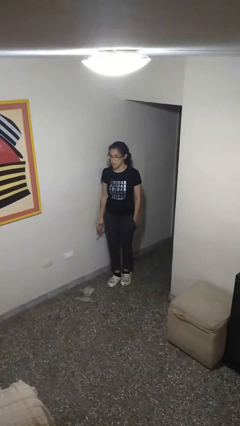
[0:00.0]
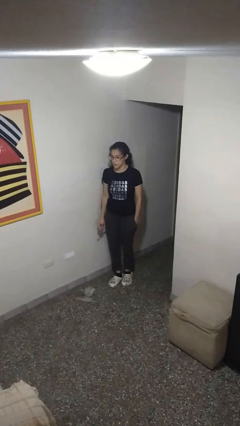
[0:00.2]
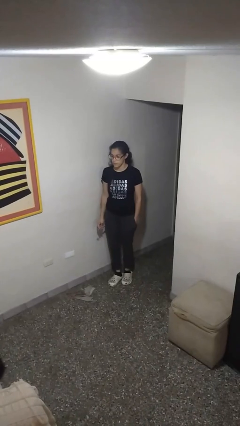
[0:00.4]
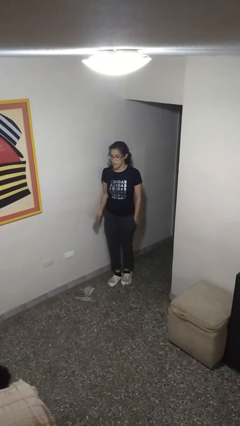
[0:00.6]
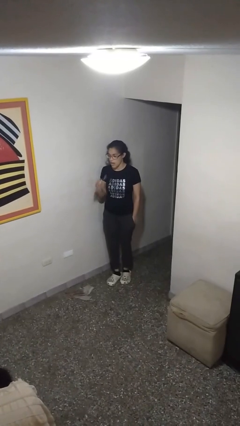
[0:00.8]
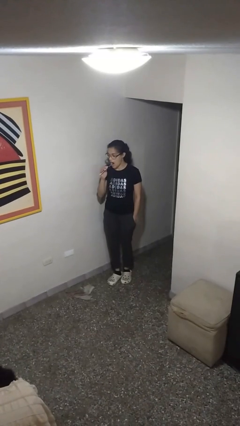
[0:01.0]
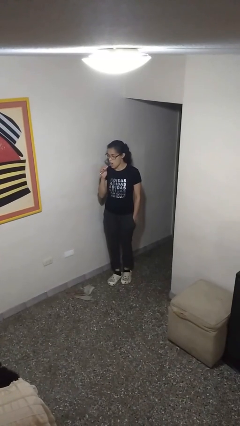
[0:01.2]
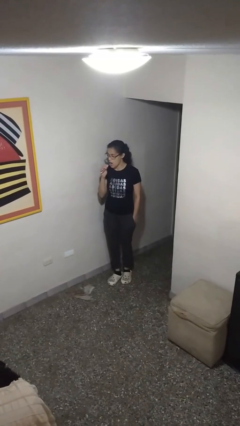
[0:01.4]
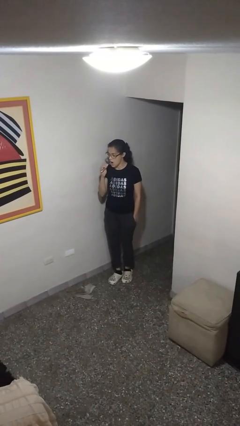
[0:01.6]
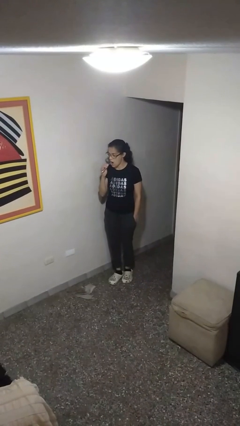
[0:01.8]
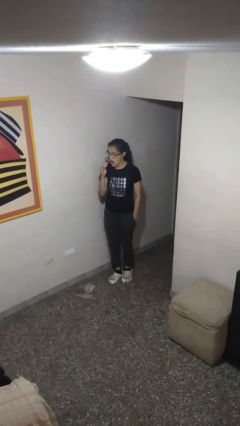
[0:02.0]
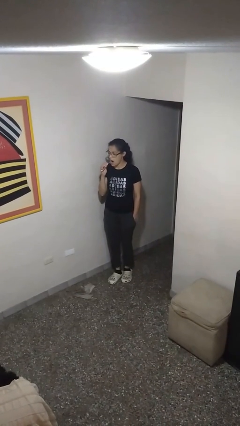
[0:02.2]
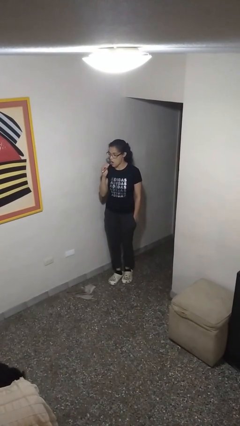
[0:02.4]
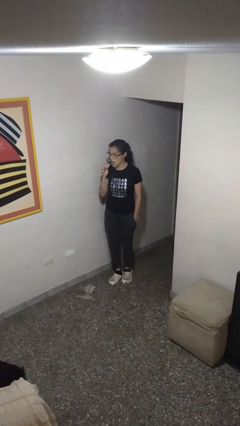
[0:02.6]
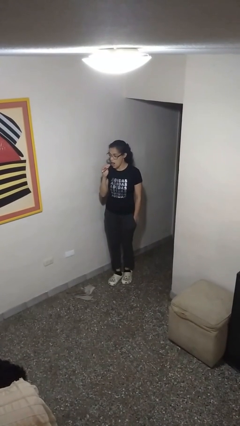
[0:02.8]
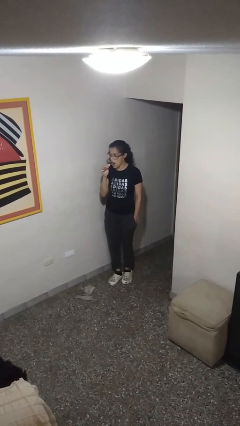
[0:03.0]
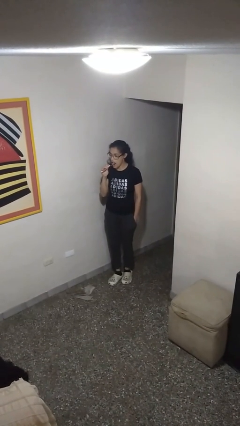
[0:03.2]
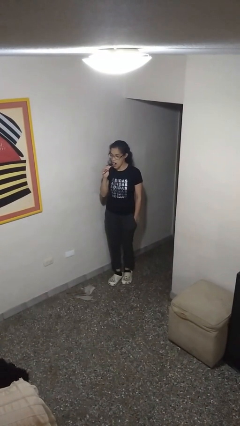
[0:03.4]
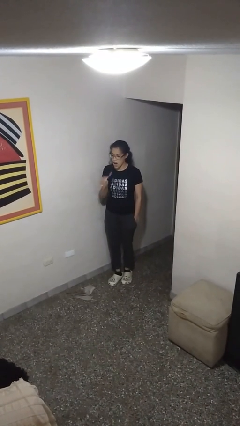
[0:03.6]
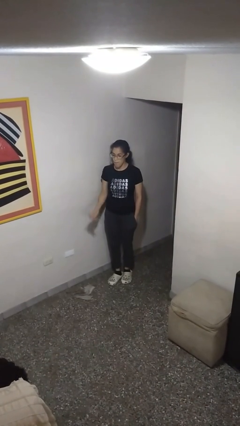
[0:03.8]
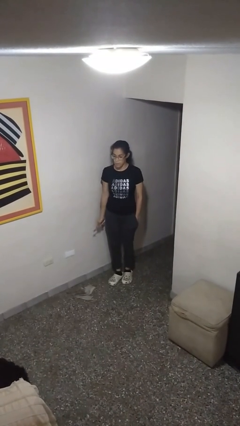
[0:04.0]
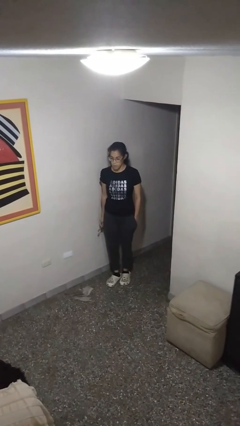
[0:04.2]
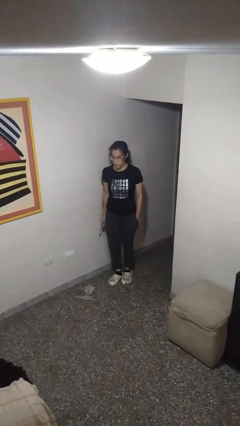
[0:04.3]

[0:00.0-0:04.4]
person brushes teeth

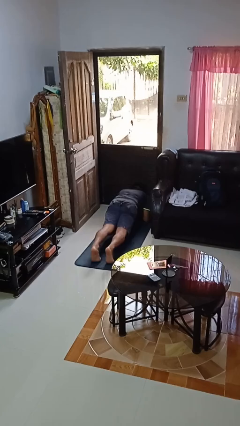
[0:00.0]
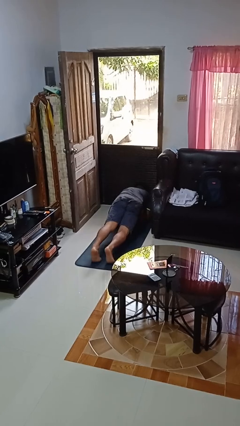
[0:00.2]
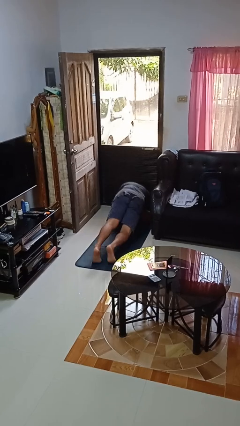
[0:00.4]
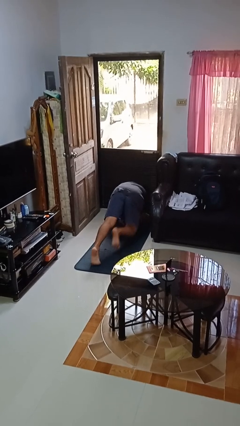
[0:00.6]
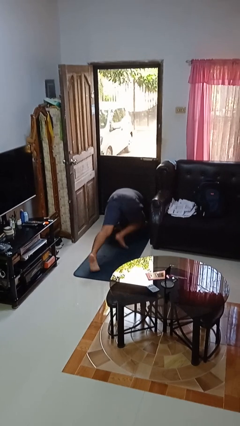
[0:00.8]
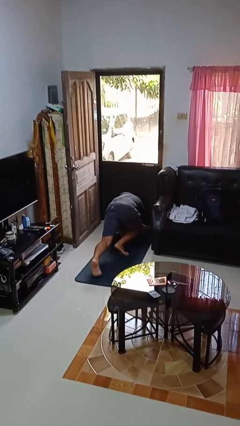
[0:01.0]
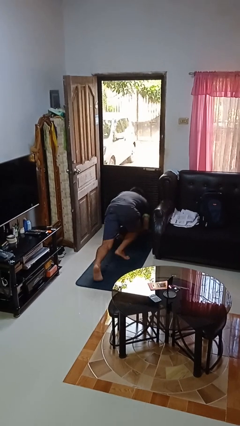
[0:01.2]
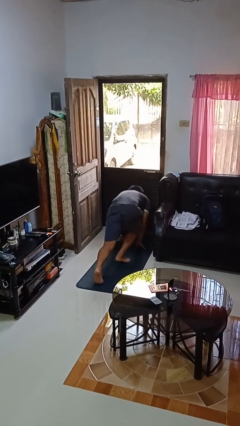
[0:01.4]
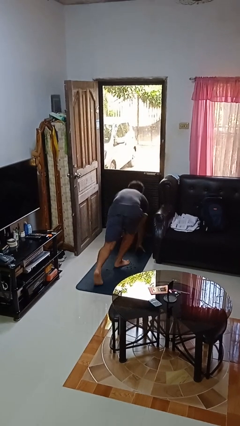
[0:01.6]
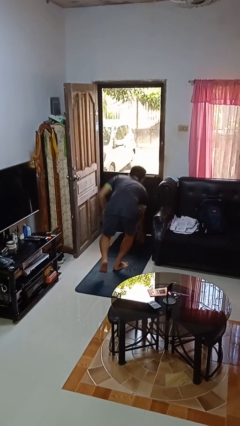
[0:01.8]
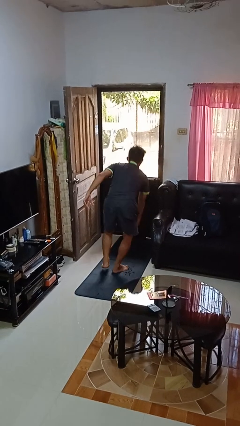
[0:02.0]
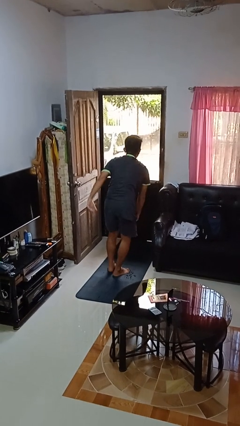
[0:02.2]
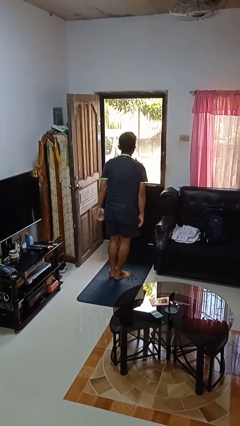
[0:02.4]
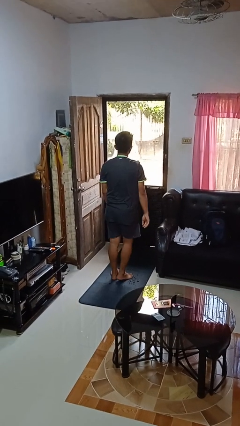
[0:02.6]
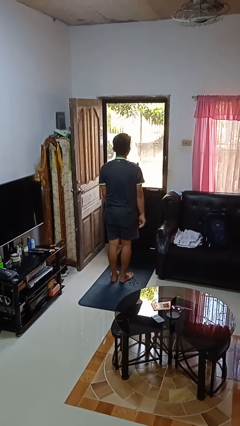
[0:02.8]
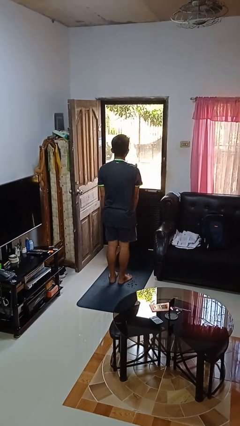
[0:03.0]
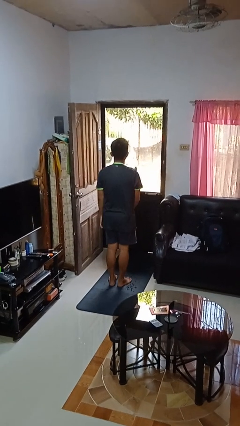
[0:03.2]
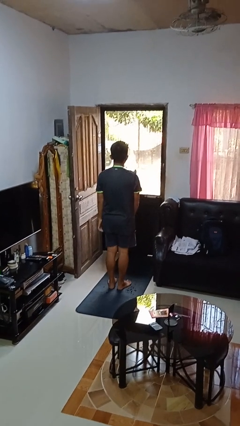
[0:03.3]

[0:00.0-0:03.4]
person stands up from floor

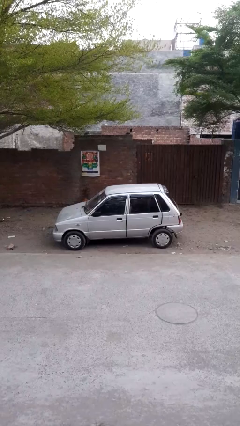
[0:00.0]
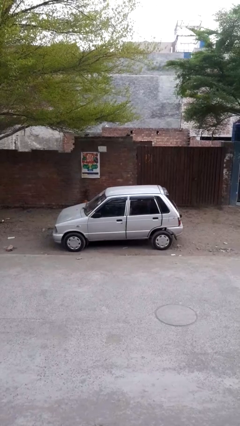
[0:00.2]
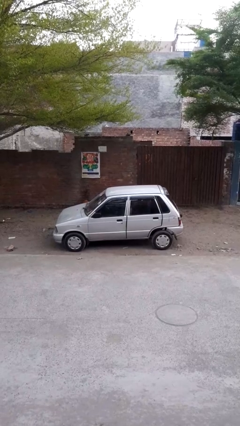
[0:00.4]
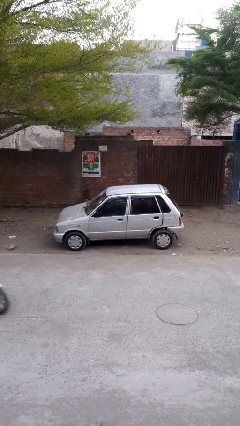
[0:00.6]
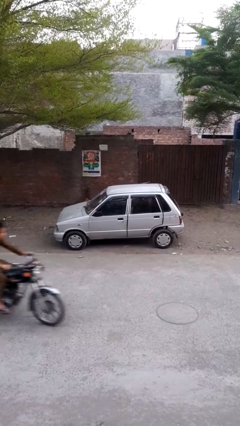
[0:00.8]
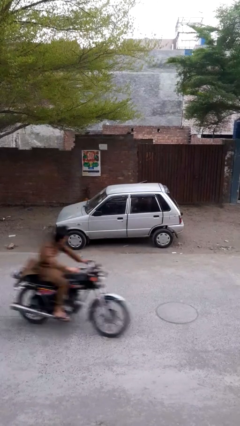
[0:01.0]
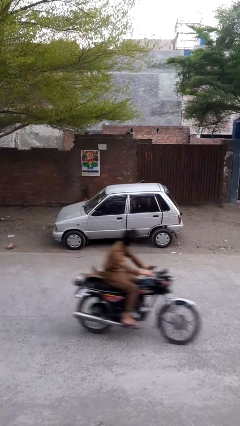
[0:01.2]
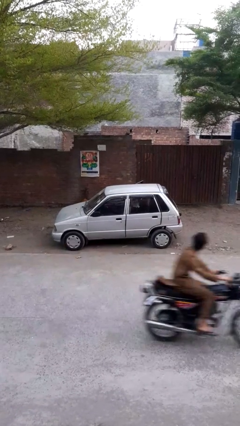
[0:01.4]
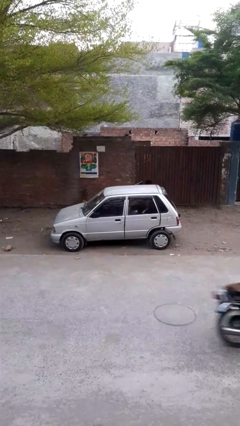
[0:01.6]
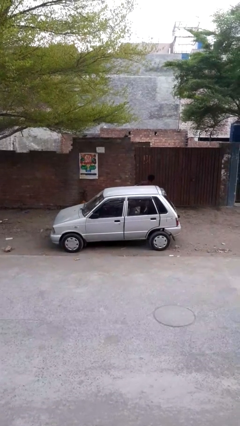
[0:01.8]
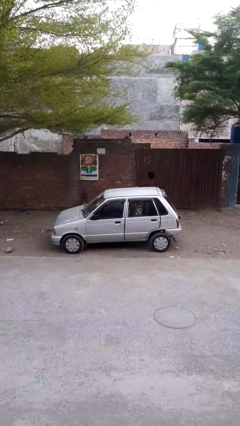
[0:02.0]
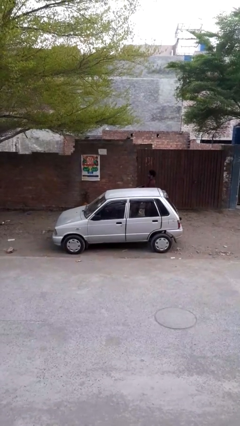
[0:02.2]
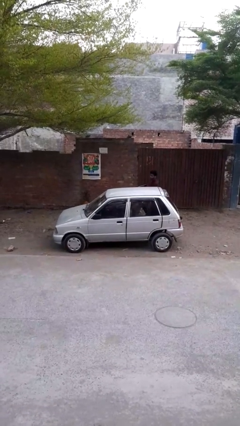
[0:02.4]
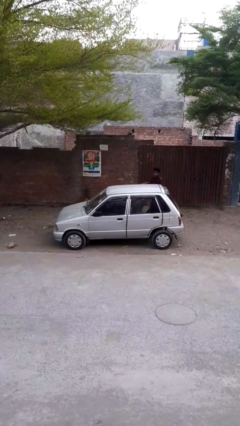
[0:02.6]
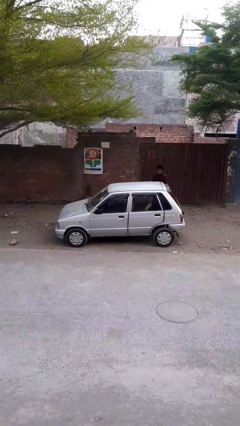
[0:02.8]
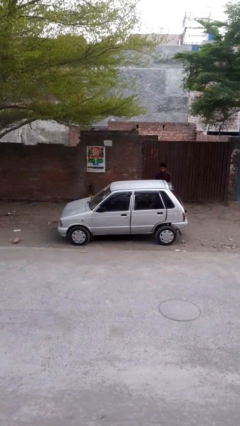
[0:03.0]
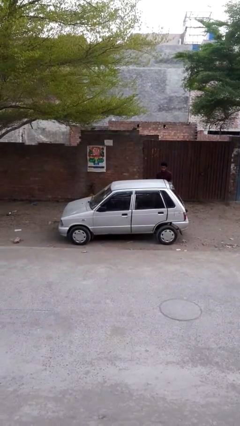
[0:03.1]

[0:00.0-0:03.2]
car drops off person

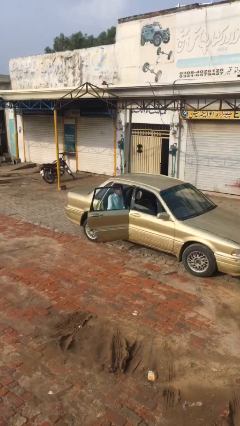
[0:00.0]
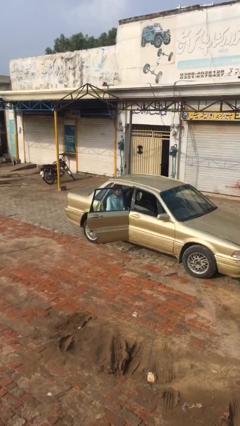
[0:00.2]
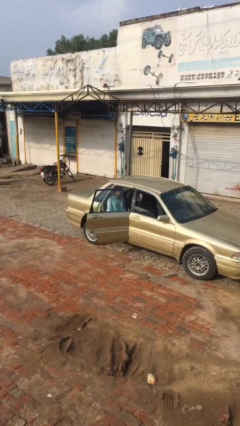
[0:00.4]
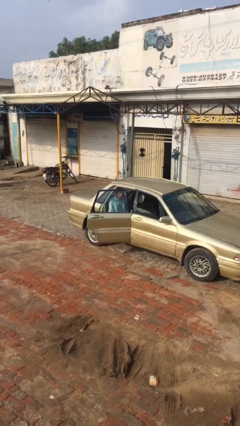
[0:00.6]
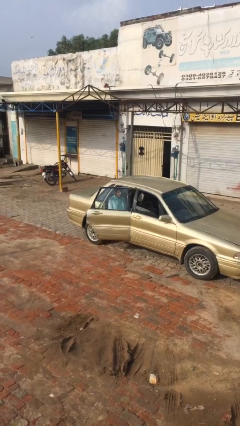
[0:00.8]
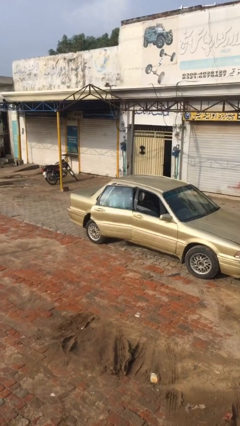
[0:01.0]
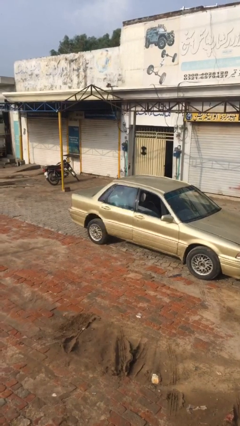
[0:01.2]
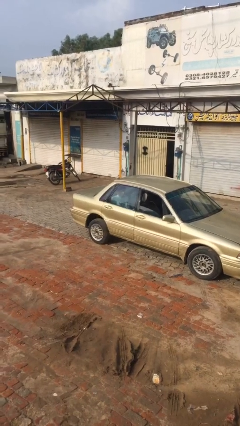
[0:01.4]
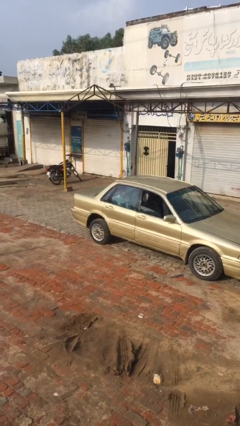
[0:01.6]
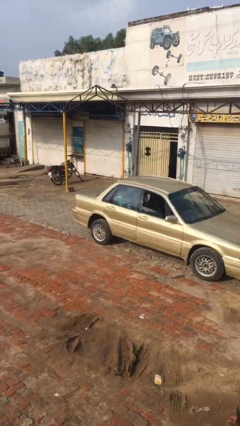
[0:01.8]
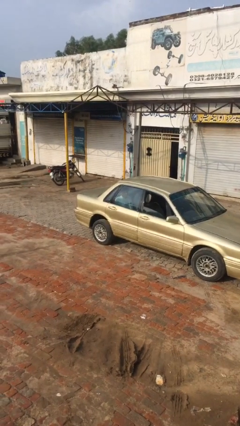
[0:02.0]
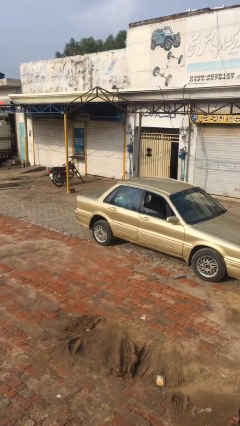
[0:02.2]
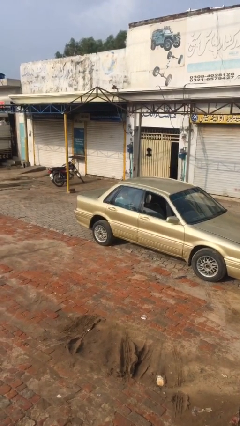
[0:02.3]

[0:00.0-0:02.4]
person closes car door

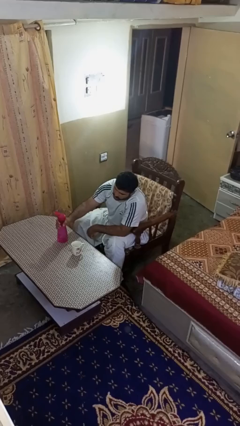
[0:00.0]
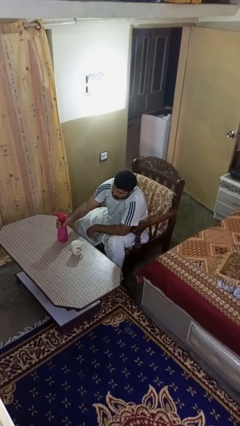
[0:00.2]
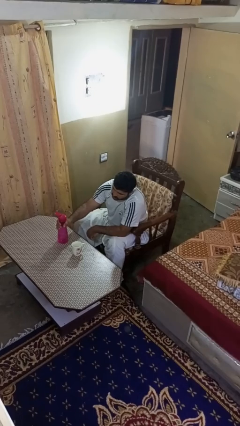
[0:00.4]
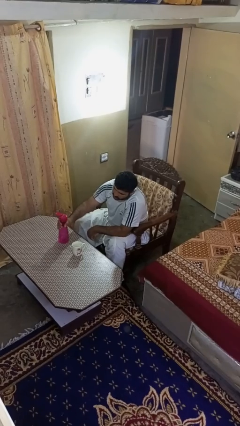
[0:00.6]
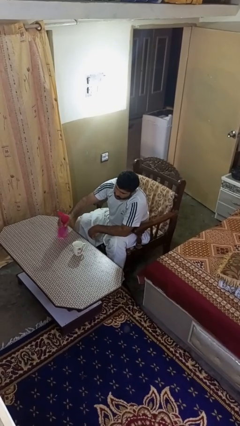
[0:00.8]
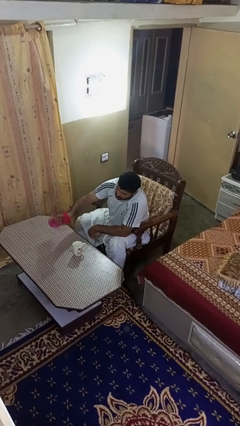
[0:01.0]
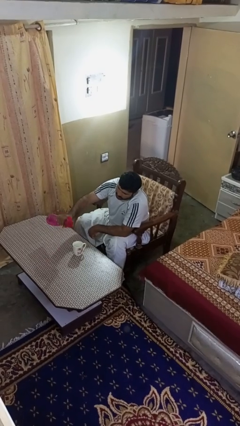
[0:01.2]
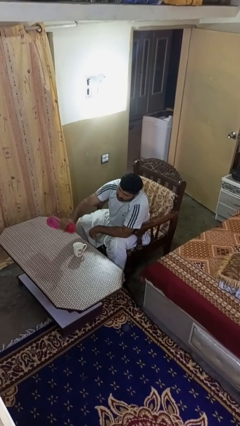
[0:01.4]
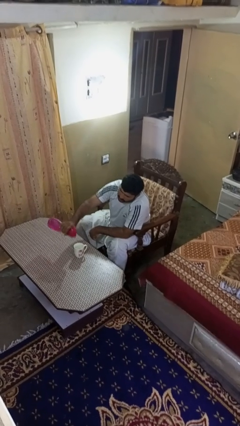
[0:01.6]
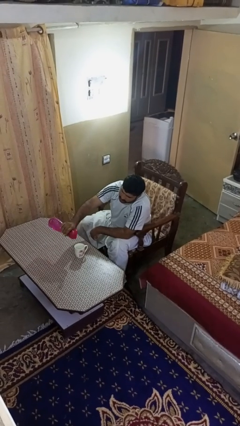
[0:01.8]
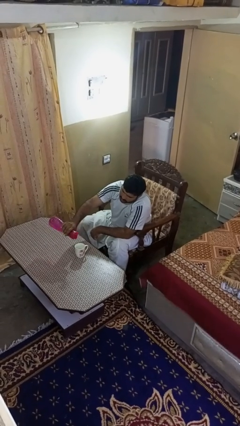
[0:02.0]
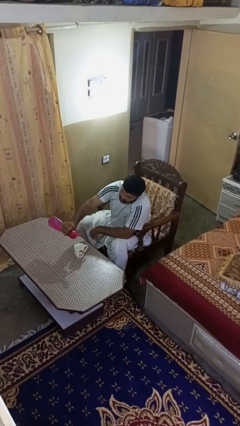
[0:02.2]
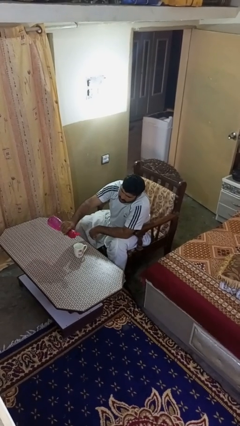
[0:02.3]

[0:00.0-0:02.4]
person pours liquid into cup

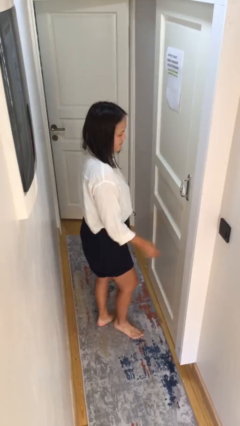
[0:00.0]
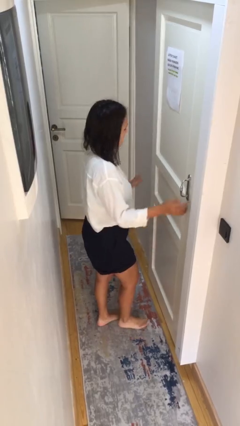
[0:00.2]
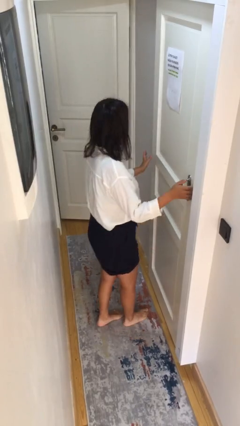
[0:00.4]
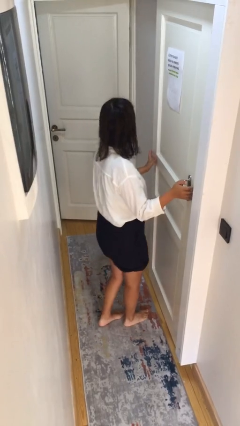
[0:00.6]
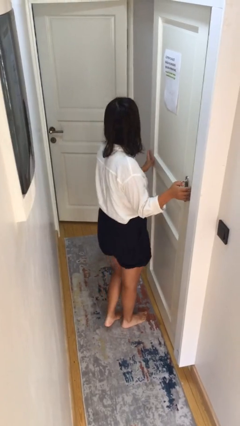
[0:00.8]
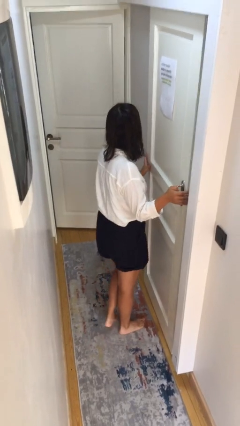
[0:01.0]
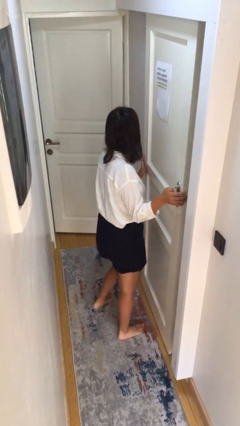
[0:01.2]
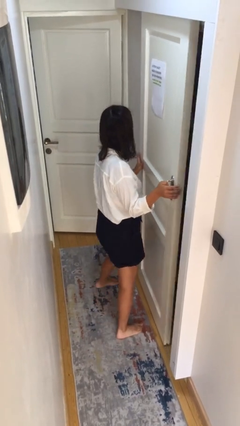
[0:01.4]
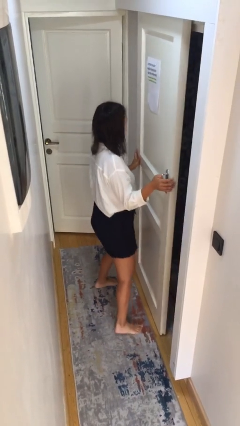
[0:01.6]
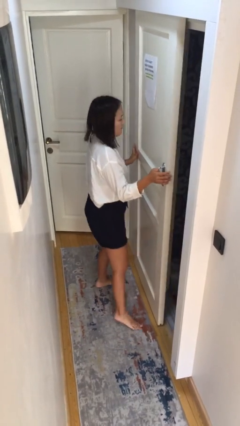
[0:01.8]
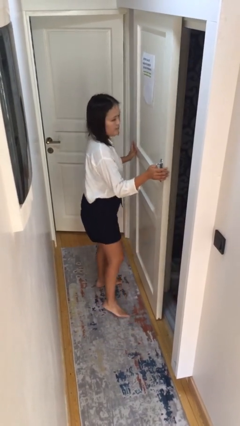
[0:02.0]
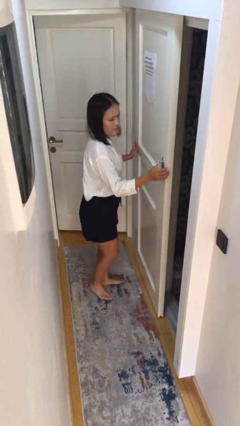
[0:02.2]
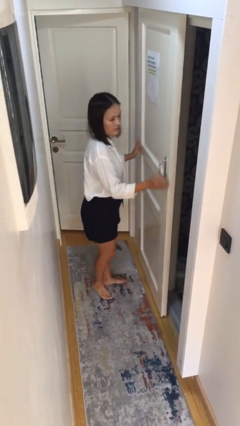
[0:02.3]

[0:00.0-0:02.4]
person opens sliding door
